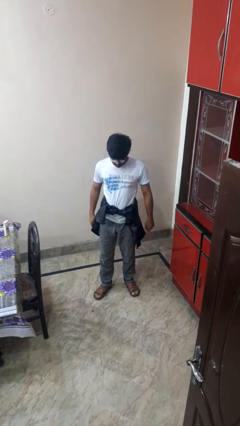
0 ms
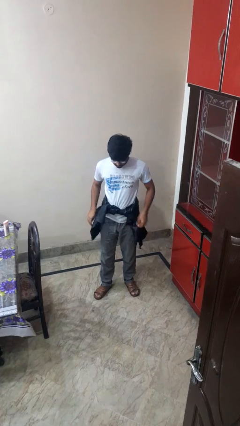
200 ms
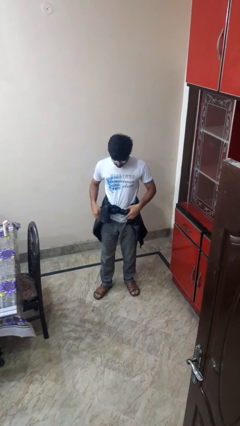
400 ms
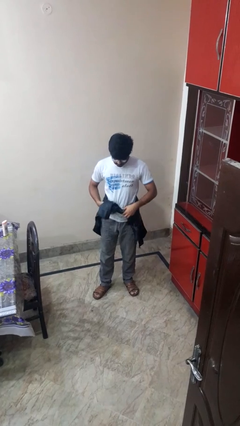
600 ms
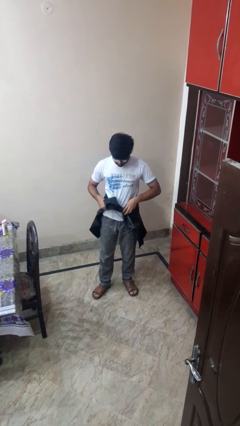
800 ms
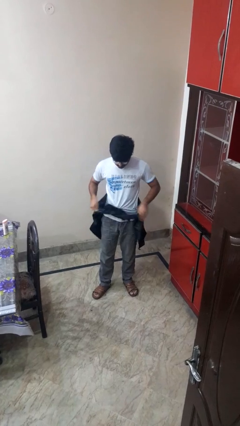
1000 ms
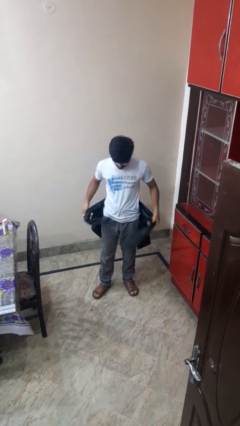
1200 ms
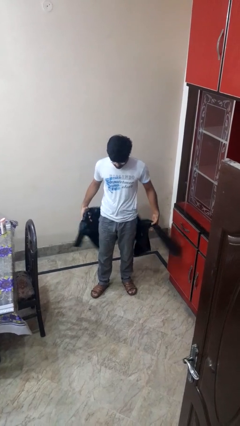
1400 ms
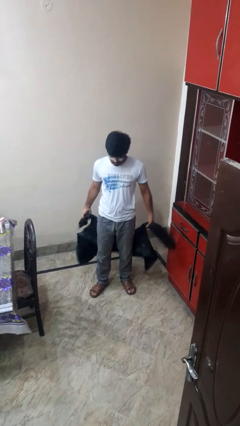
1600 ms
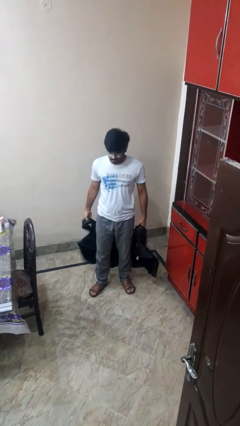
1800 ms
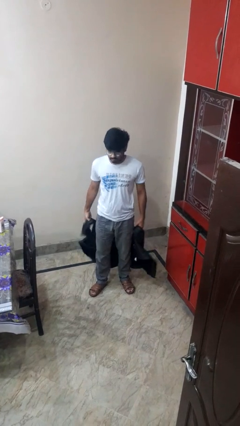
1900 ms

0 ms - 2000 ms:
person unties jacket around waist

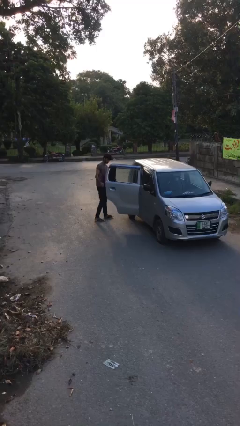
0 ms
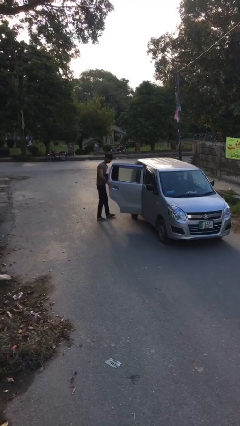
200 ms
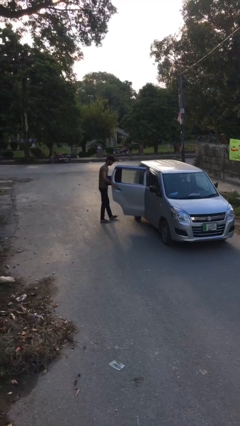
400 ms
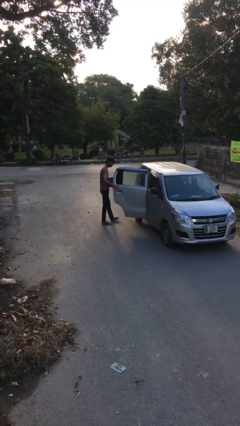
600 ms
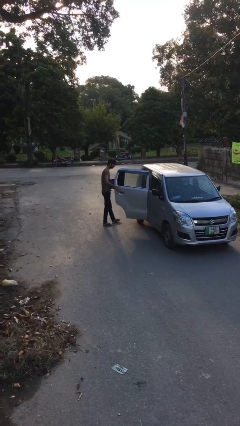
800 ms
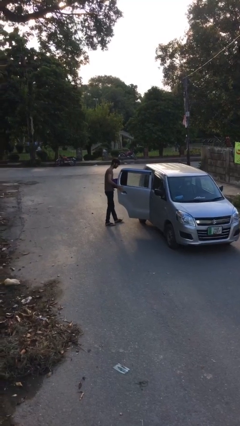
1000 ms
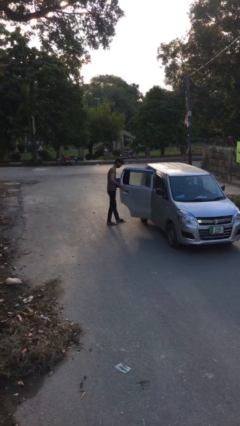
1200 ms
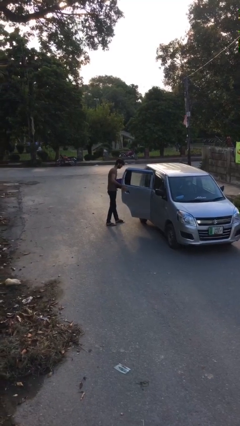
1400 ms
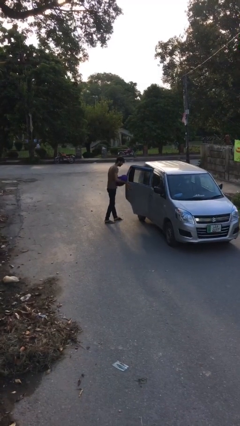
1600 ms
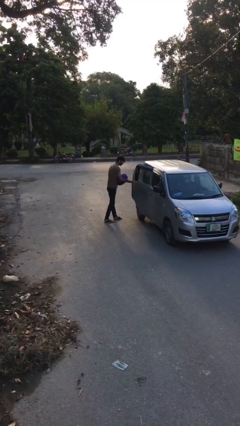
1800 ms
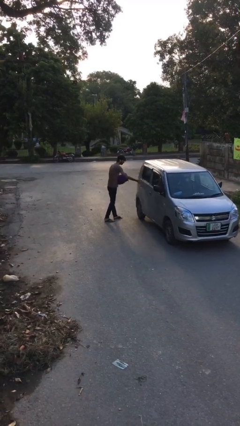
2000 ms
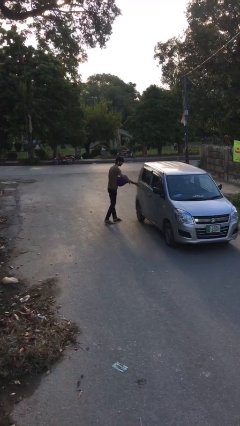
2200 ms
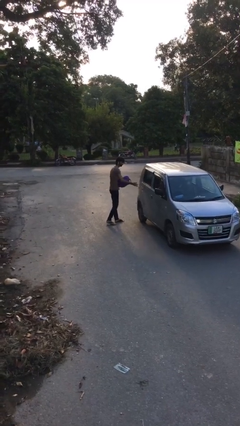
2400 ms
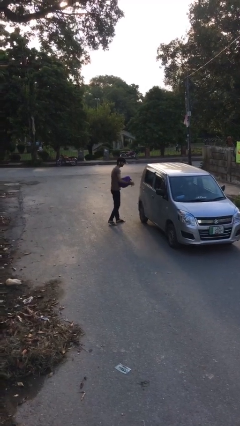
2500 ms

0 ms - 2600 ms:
person closes car door

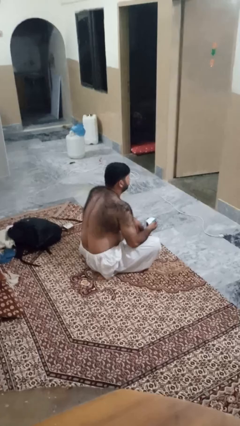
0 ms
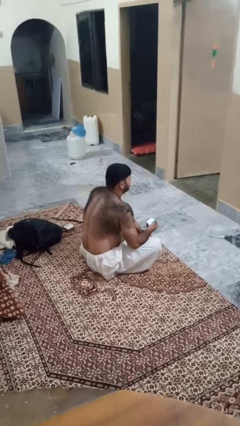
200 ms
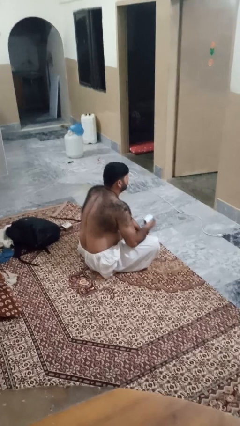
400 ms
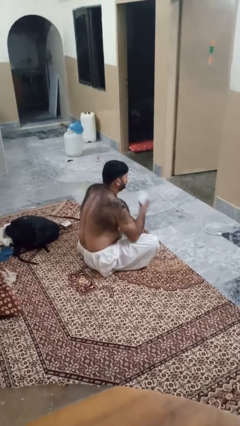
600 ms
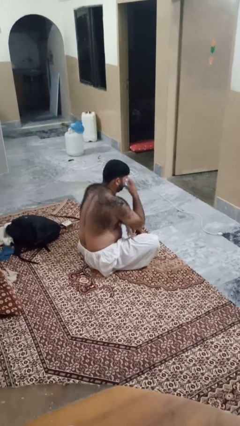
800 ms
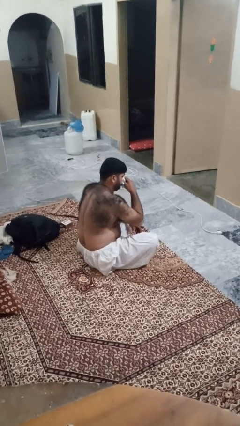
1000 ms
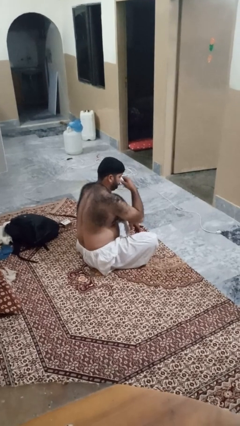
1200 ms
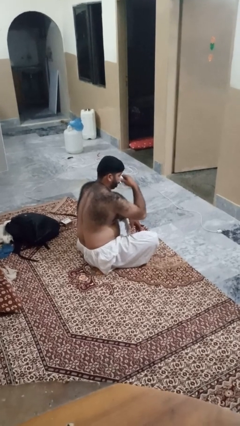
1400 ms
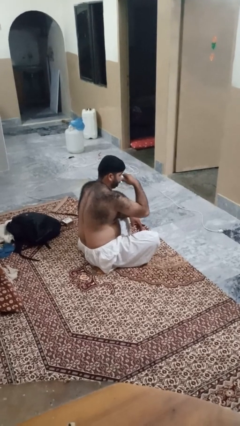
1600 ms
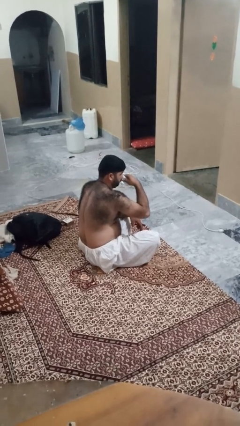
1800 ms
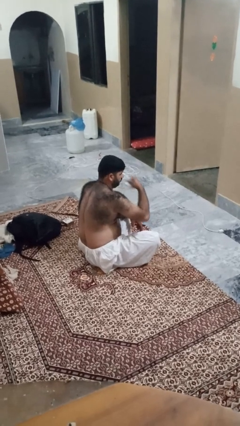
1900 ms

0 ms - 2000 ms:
person blows nose

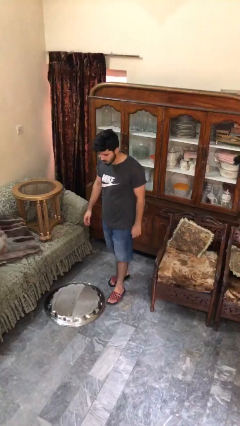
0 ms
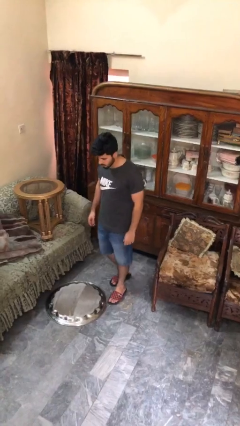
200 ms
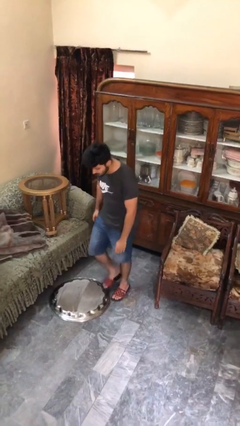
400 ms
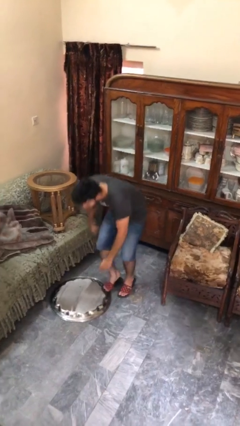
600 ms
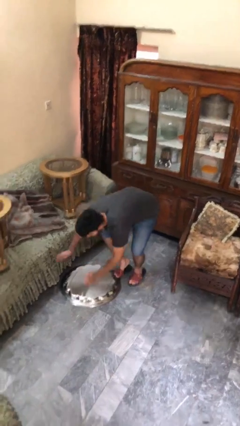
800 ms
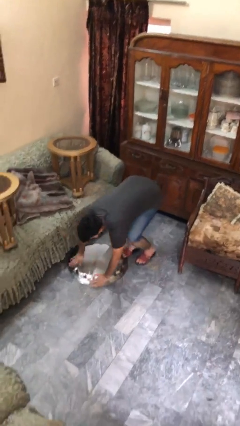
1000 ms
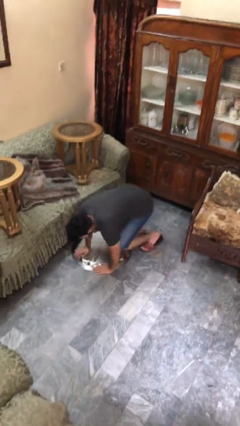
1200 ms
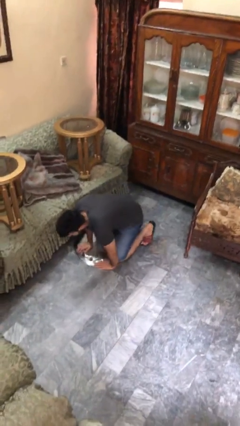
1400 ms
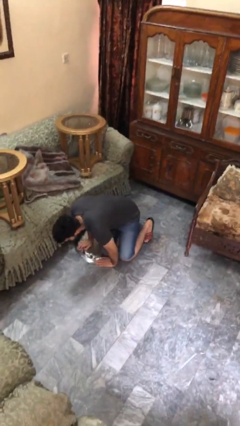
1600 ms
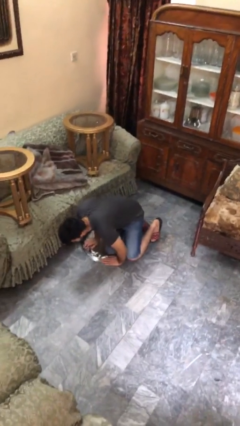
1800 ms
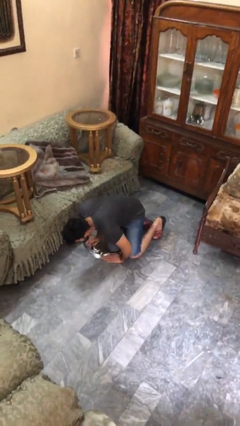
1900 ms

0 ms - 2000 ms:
person trips on object on floor

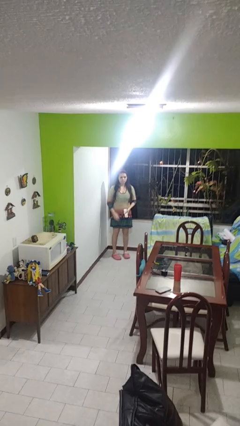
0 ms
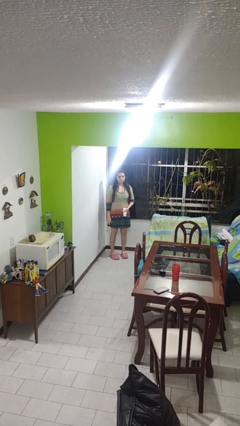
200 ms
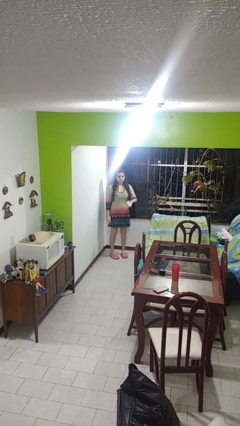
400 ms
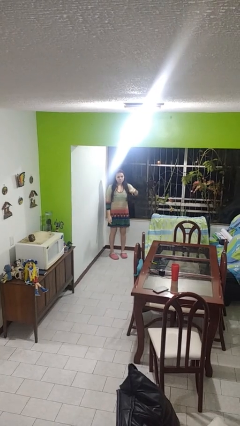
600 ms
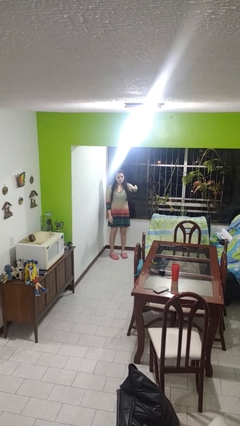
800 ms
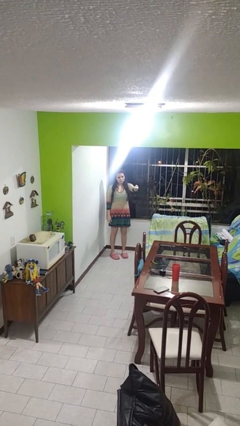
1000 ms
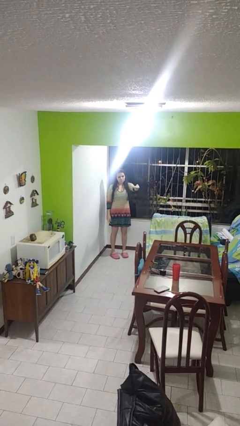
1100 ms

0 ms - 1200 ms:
person uses television remote

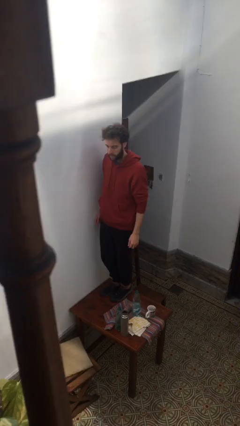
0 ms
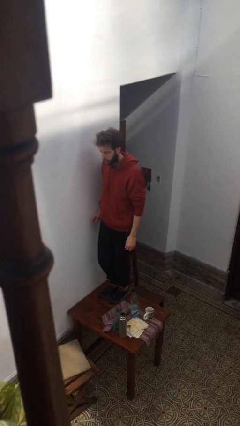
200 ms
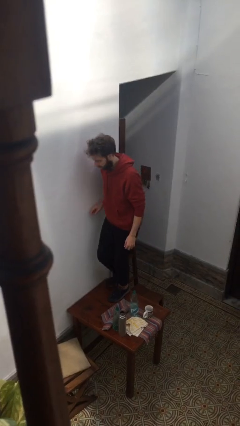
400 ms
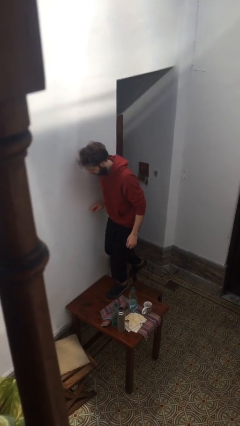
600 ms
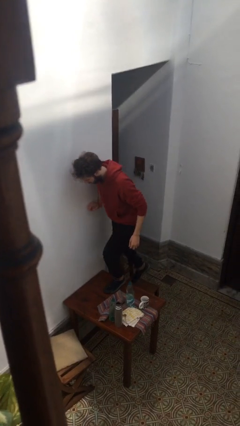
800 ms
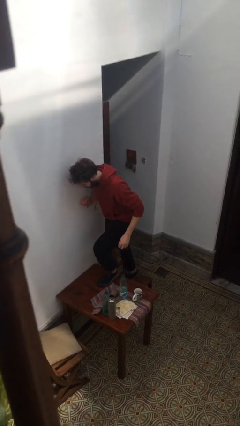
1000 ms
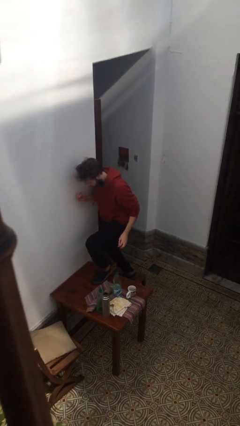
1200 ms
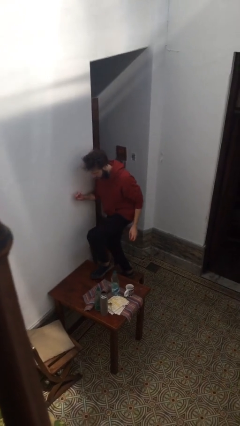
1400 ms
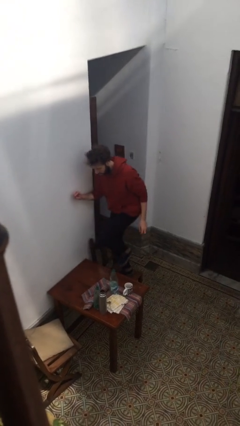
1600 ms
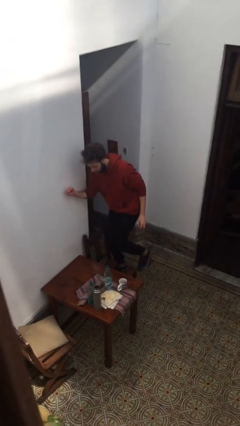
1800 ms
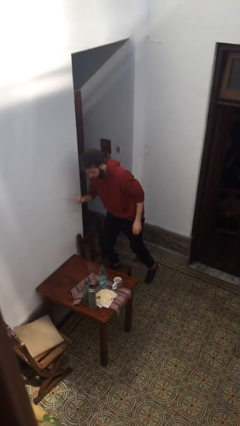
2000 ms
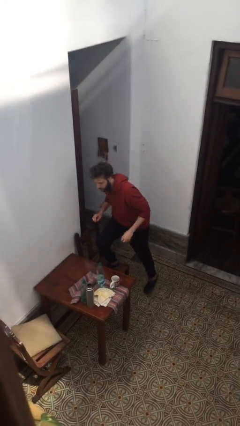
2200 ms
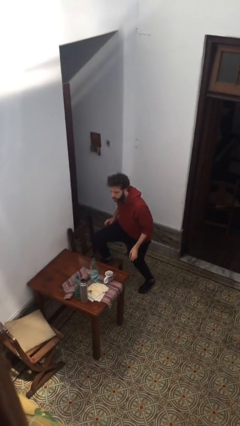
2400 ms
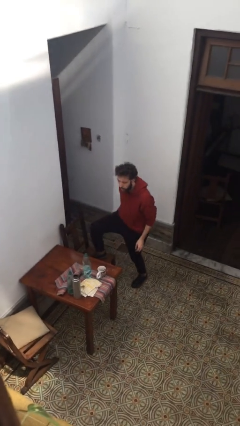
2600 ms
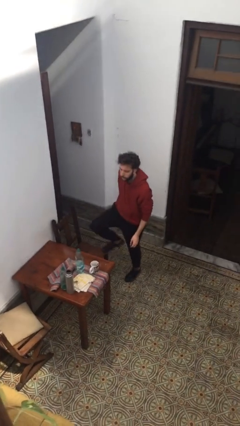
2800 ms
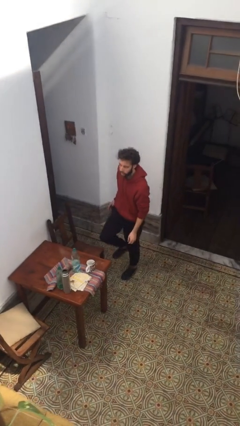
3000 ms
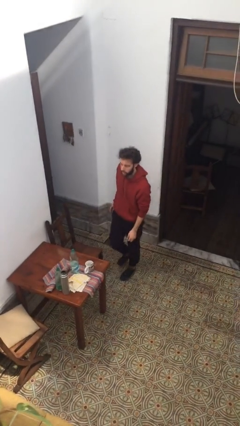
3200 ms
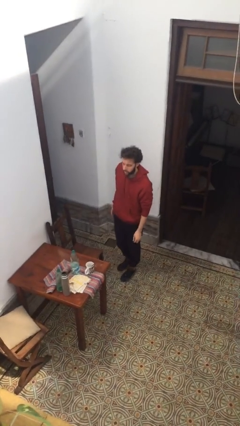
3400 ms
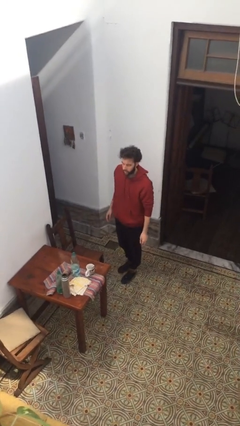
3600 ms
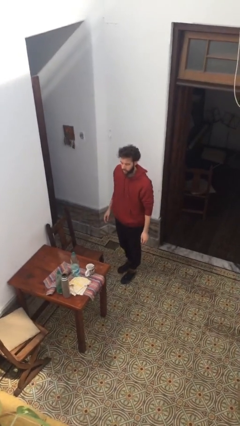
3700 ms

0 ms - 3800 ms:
person climbs off table

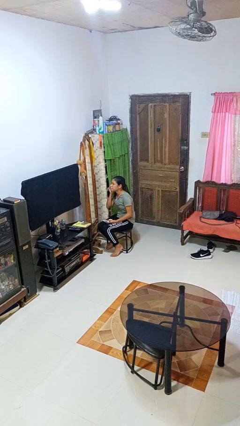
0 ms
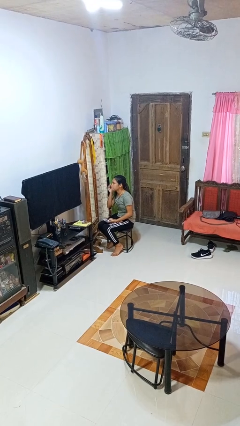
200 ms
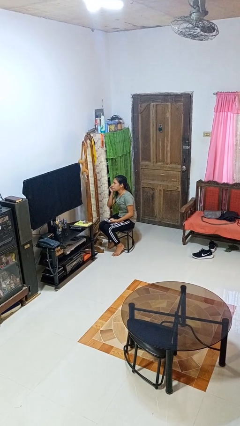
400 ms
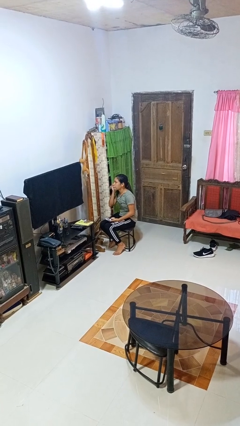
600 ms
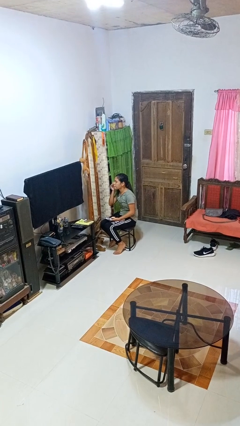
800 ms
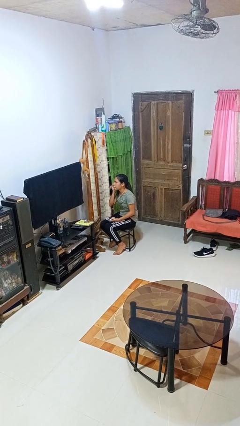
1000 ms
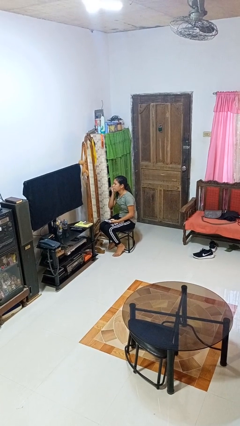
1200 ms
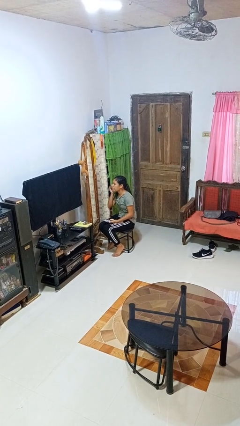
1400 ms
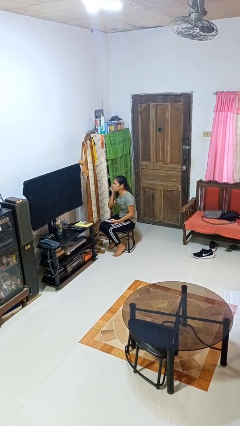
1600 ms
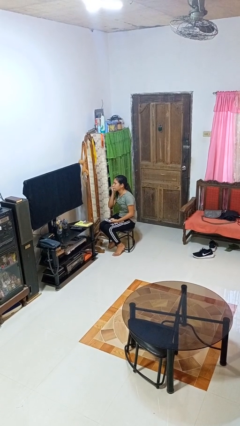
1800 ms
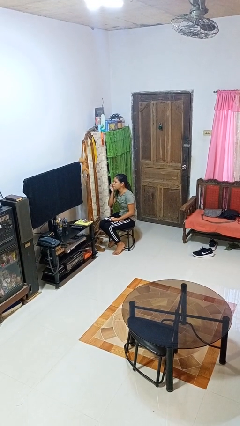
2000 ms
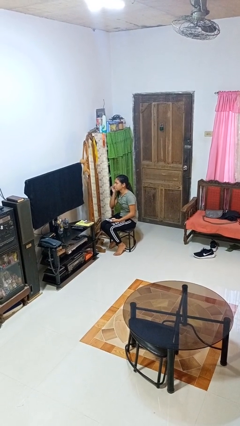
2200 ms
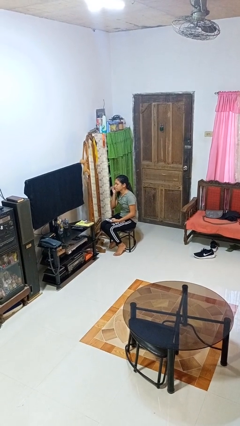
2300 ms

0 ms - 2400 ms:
person applies foundation makeup

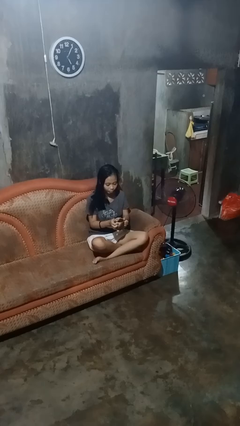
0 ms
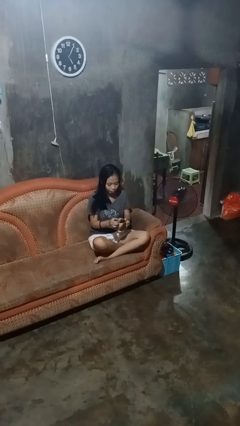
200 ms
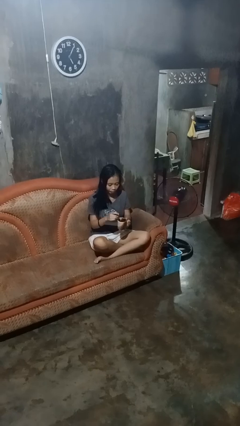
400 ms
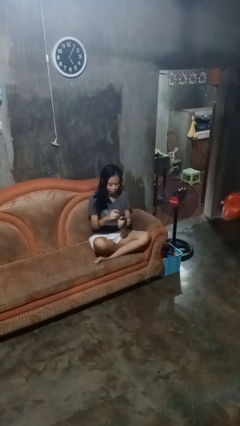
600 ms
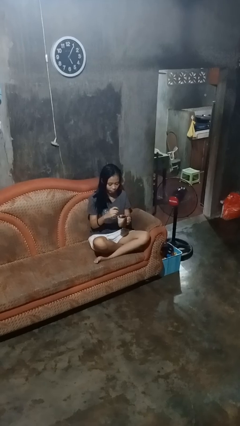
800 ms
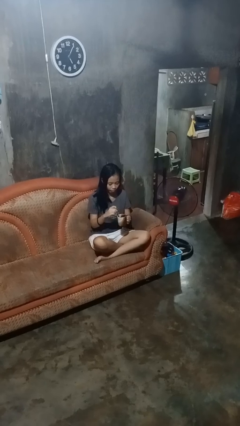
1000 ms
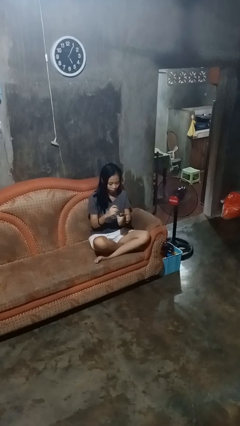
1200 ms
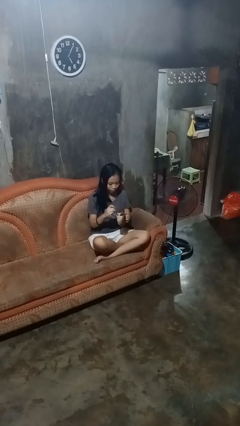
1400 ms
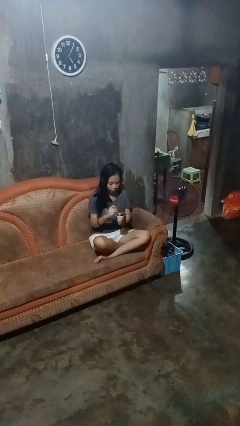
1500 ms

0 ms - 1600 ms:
person stirs mug
